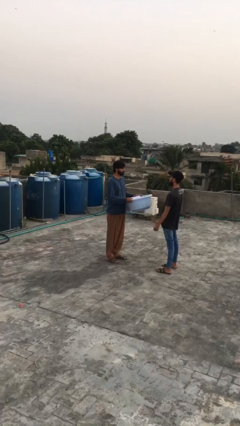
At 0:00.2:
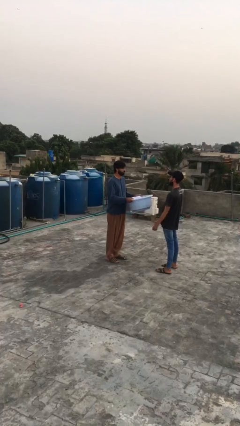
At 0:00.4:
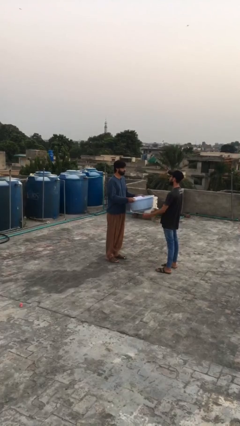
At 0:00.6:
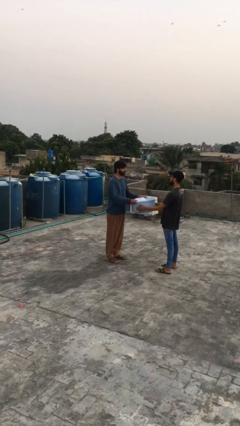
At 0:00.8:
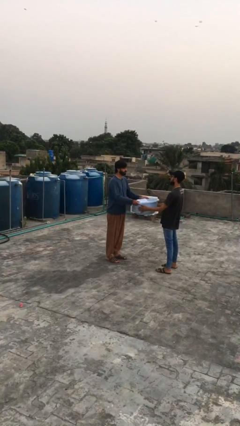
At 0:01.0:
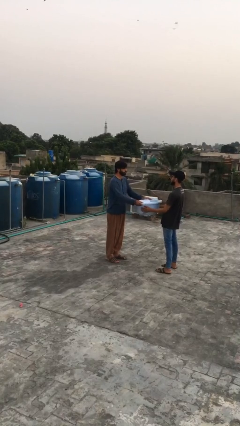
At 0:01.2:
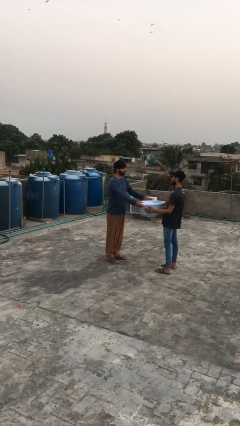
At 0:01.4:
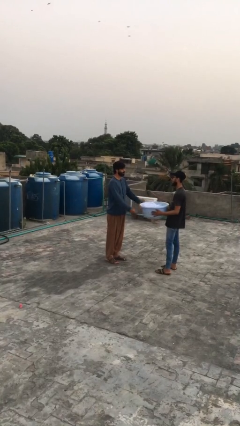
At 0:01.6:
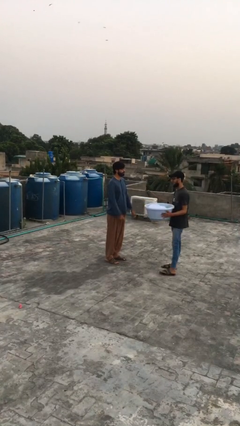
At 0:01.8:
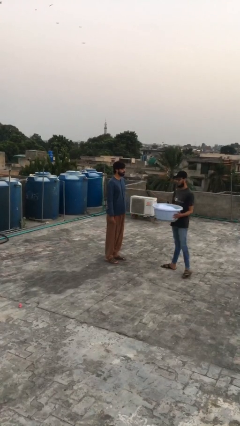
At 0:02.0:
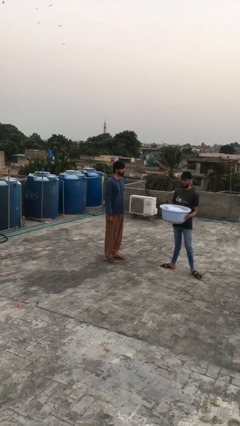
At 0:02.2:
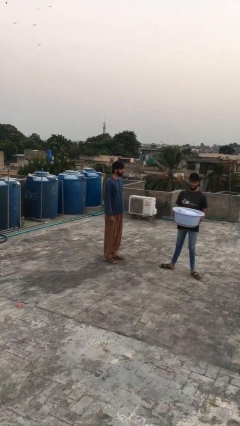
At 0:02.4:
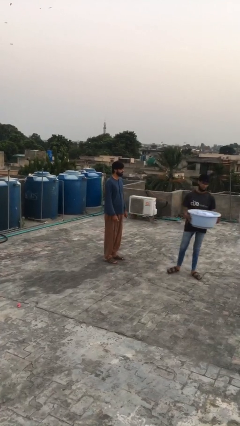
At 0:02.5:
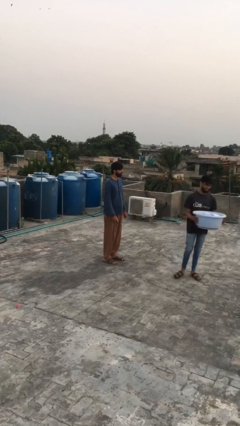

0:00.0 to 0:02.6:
person transfers object to person

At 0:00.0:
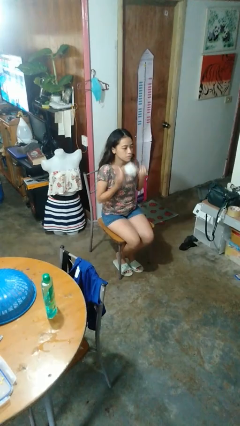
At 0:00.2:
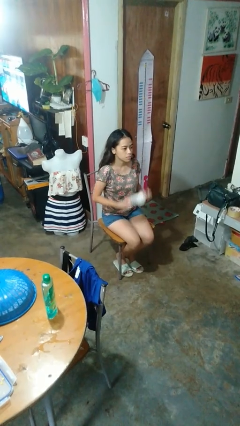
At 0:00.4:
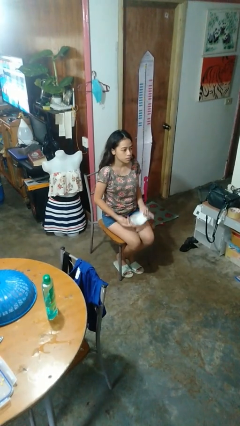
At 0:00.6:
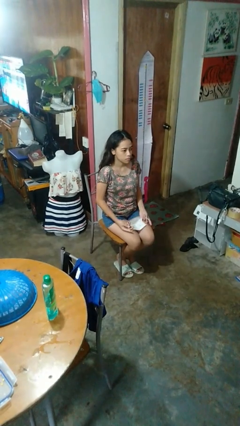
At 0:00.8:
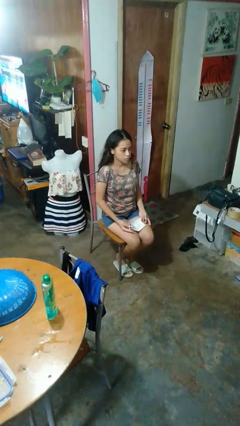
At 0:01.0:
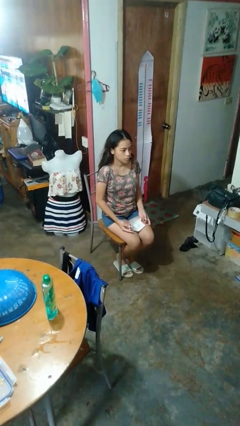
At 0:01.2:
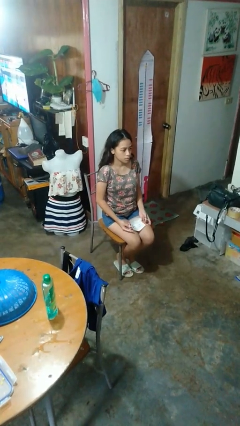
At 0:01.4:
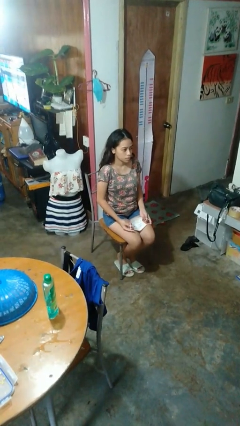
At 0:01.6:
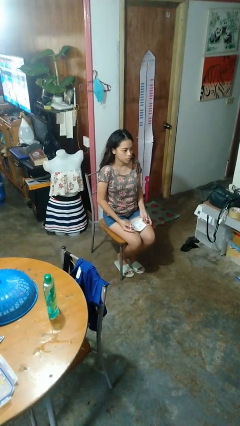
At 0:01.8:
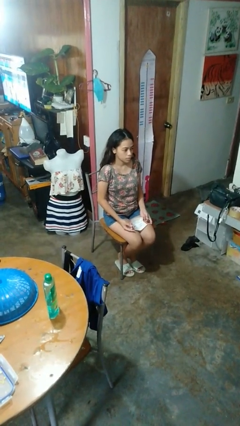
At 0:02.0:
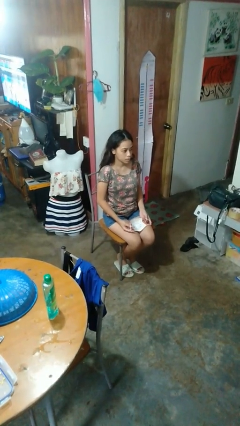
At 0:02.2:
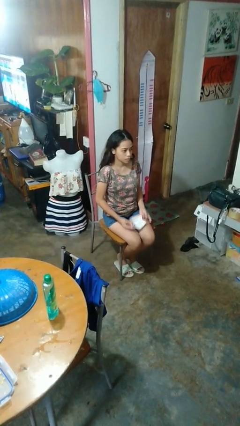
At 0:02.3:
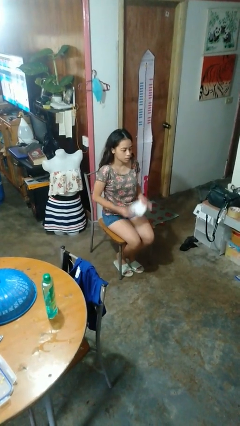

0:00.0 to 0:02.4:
person opens mailbox

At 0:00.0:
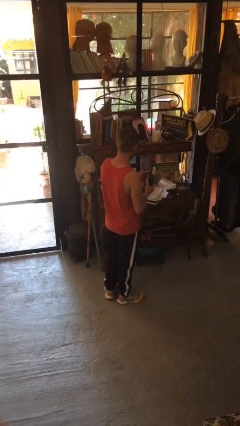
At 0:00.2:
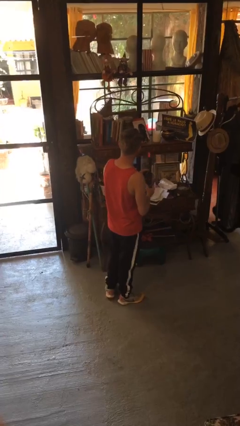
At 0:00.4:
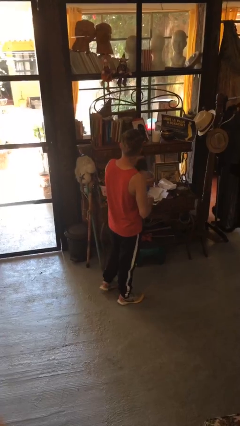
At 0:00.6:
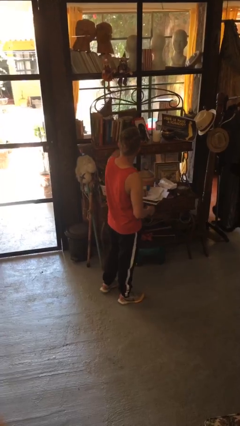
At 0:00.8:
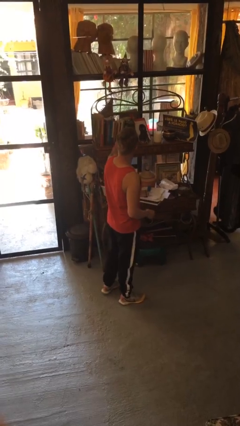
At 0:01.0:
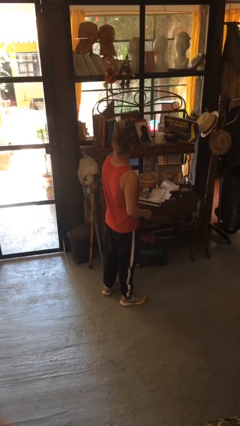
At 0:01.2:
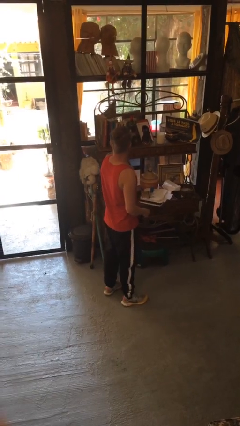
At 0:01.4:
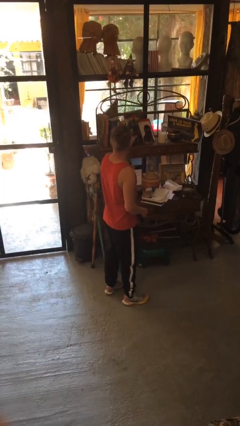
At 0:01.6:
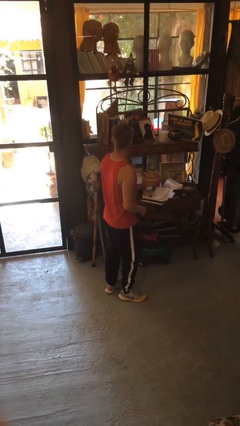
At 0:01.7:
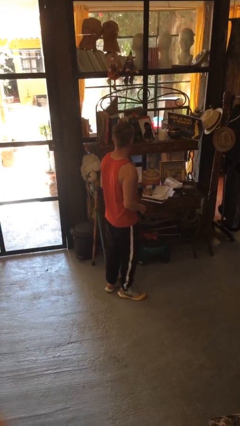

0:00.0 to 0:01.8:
person puts down object on shelf

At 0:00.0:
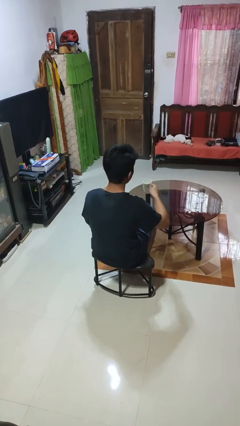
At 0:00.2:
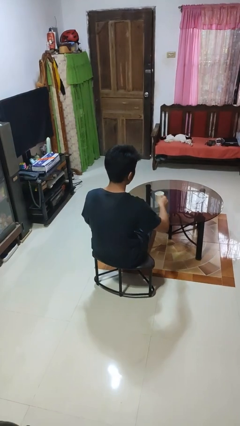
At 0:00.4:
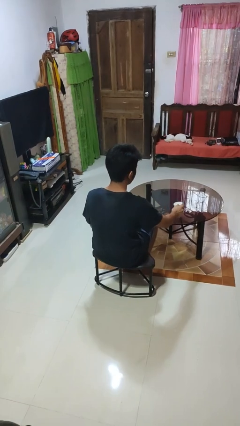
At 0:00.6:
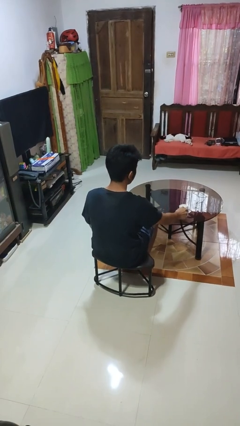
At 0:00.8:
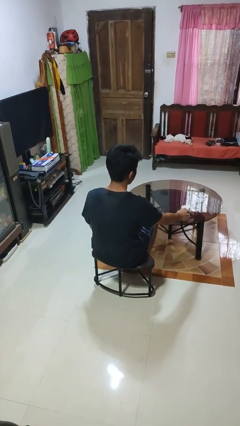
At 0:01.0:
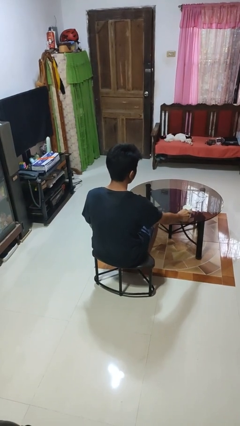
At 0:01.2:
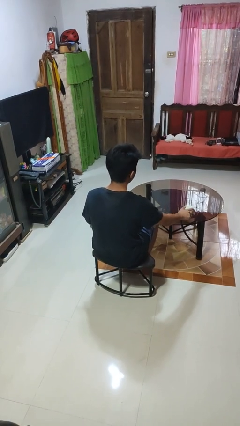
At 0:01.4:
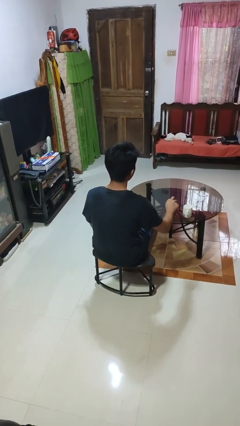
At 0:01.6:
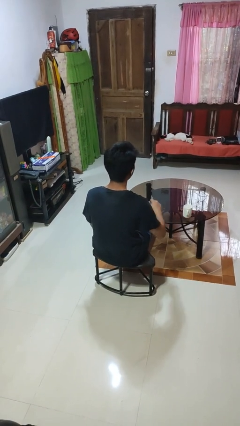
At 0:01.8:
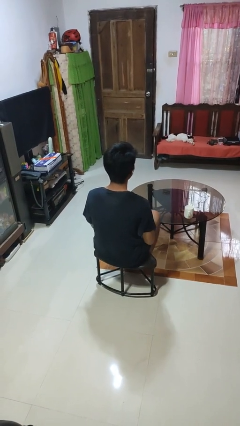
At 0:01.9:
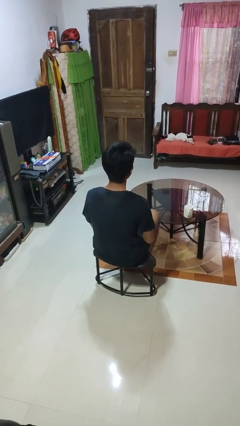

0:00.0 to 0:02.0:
person puts down object on table

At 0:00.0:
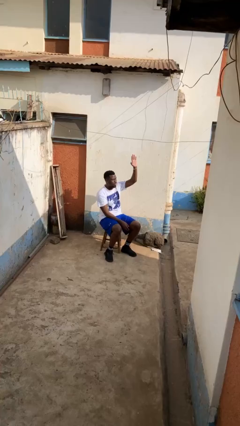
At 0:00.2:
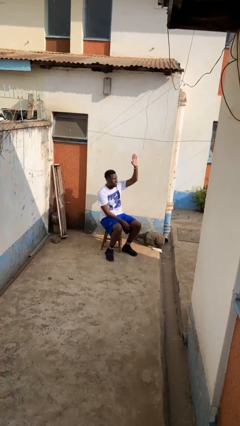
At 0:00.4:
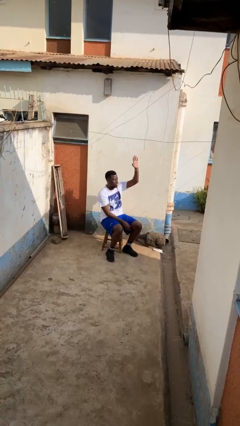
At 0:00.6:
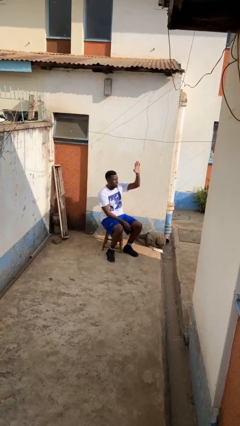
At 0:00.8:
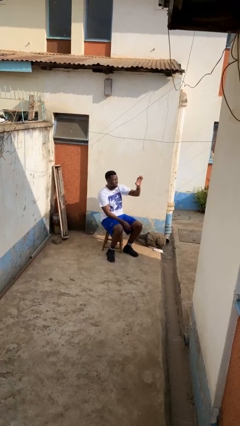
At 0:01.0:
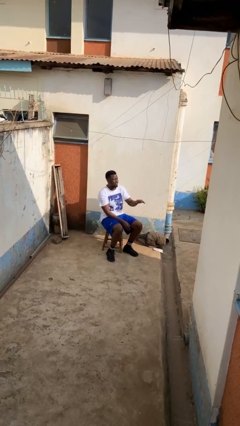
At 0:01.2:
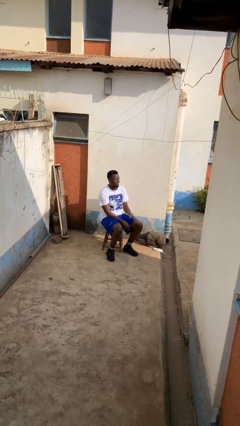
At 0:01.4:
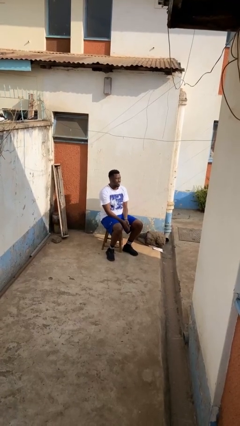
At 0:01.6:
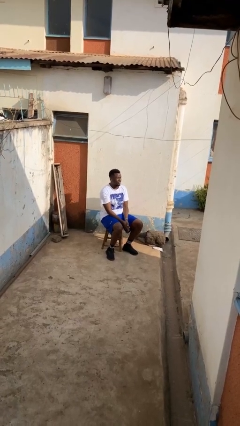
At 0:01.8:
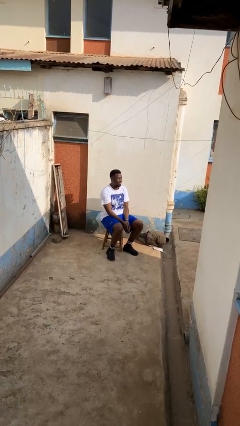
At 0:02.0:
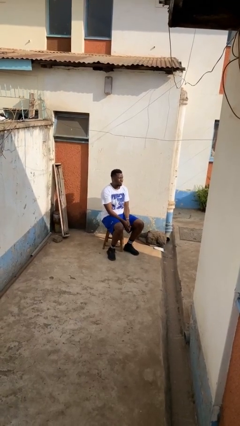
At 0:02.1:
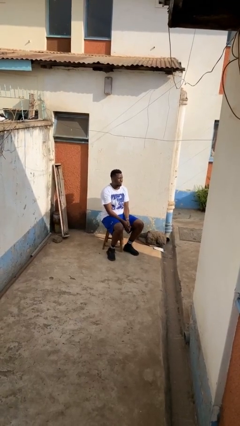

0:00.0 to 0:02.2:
person gestures lower hand

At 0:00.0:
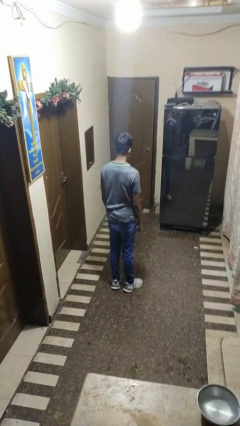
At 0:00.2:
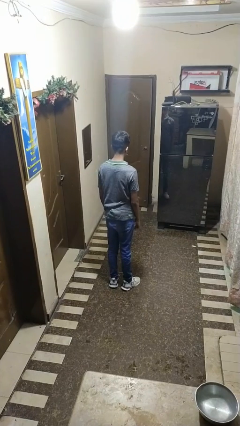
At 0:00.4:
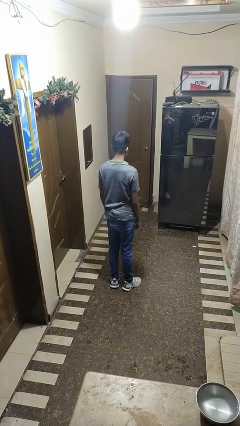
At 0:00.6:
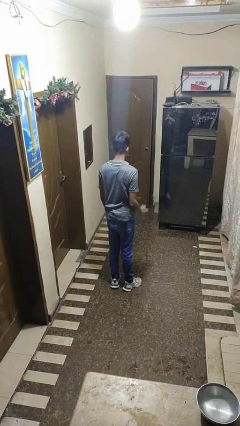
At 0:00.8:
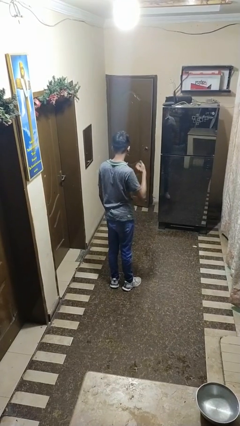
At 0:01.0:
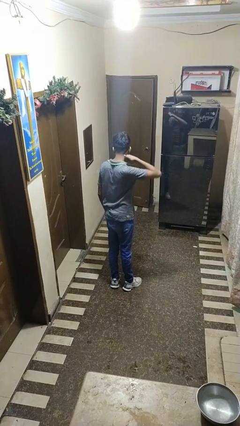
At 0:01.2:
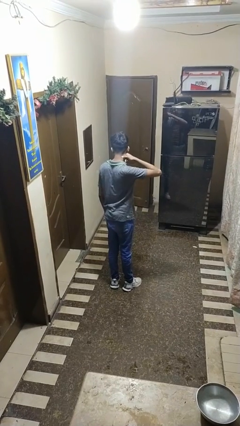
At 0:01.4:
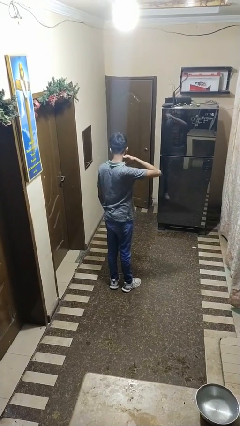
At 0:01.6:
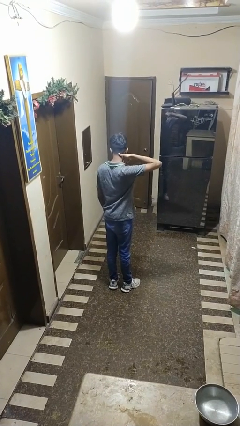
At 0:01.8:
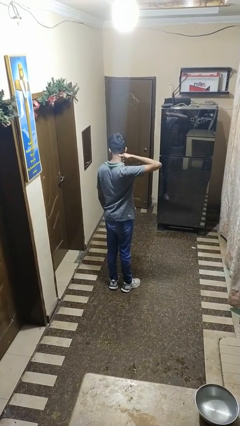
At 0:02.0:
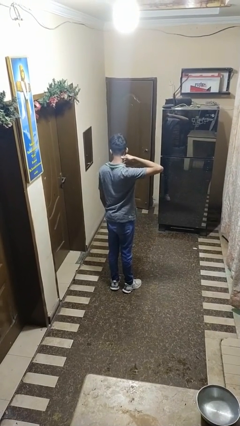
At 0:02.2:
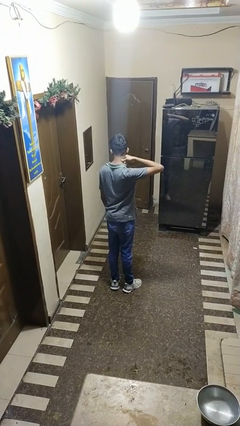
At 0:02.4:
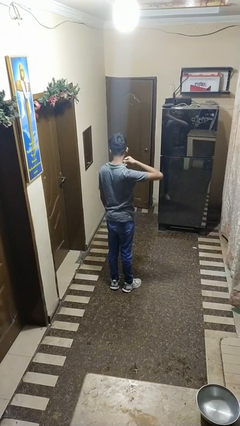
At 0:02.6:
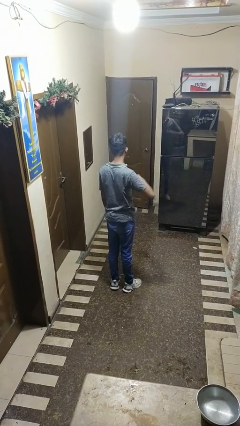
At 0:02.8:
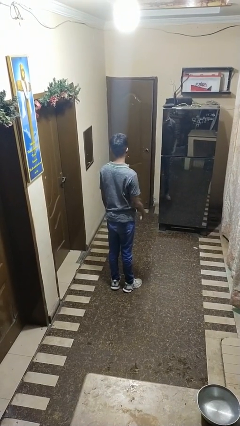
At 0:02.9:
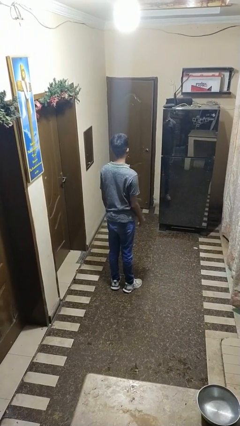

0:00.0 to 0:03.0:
person rubs neck

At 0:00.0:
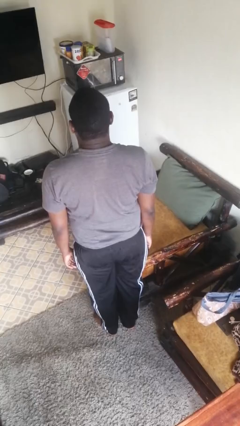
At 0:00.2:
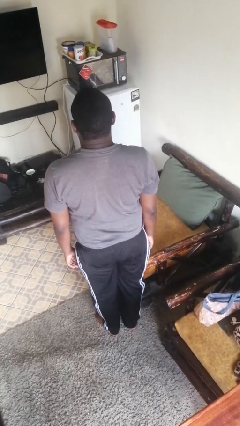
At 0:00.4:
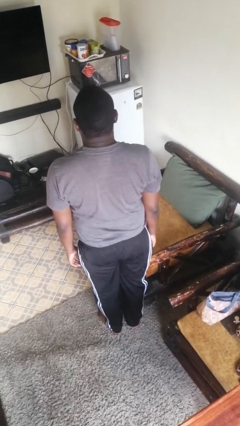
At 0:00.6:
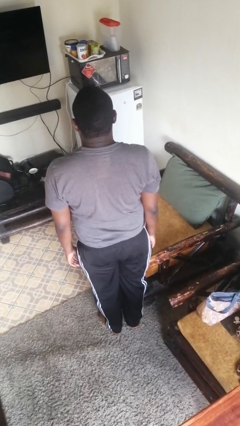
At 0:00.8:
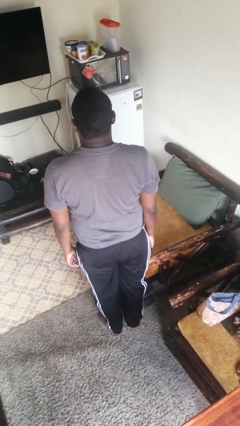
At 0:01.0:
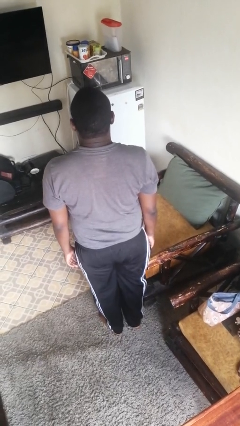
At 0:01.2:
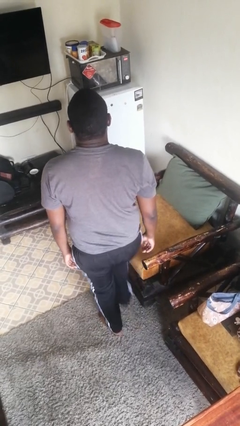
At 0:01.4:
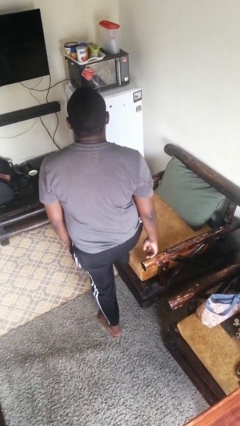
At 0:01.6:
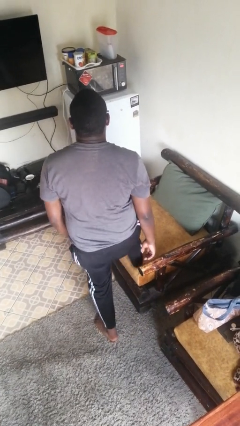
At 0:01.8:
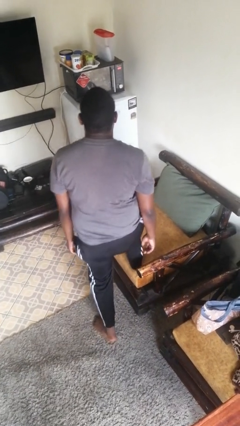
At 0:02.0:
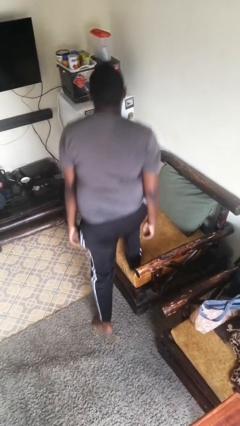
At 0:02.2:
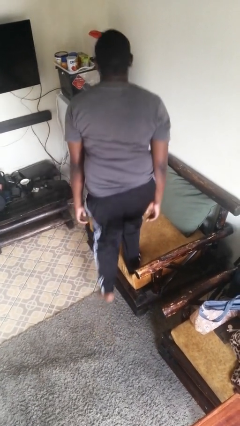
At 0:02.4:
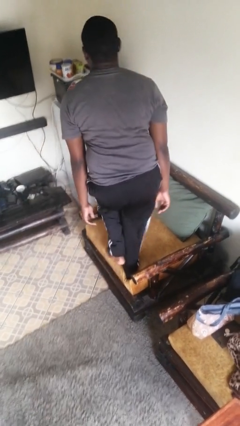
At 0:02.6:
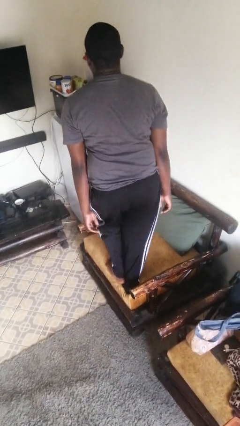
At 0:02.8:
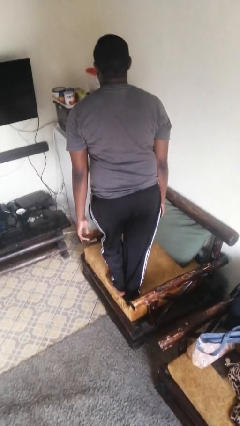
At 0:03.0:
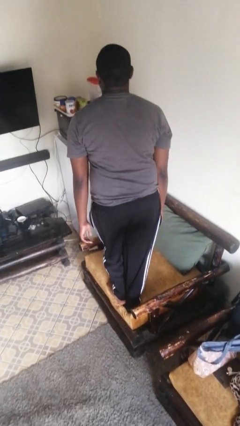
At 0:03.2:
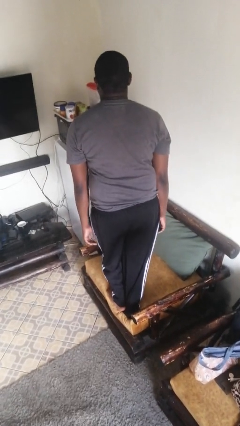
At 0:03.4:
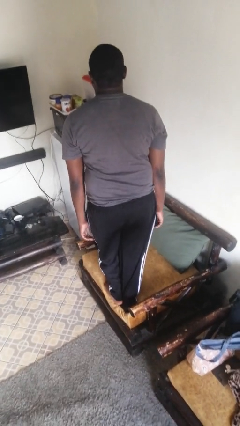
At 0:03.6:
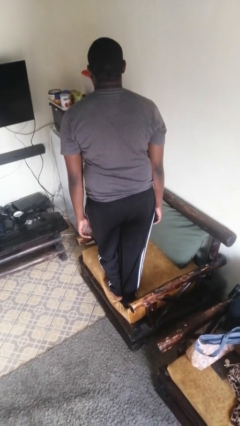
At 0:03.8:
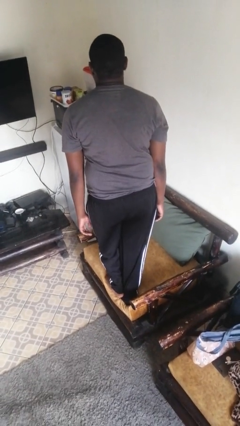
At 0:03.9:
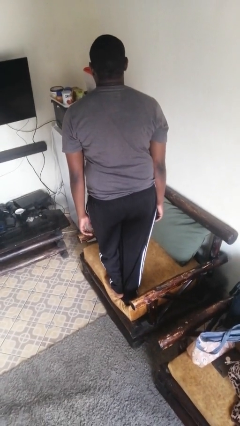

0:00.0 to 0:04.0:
person climbs on couch
